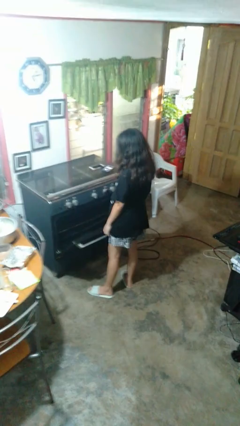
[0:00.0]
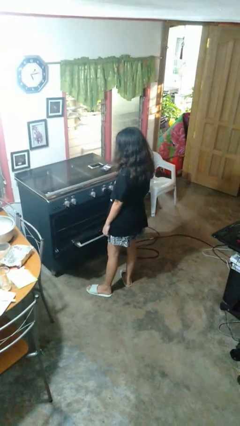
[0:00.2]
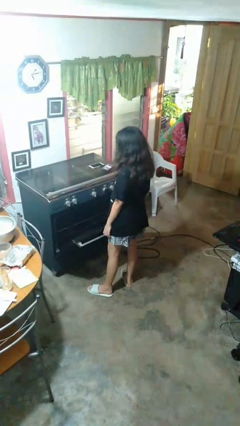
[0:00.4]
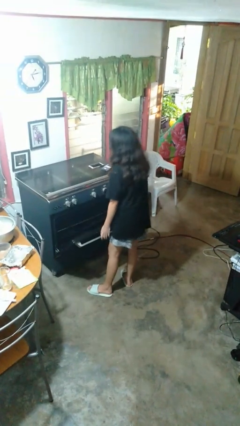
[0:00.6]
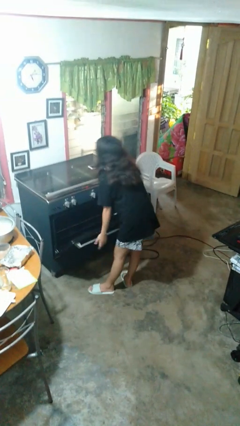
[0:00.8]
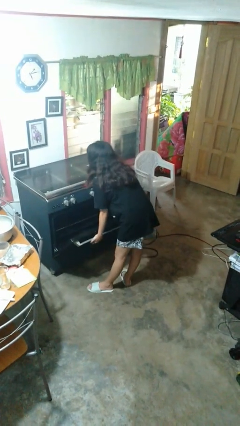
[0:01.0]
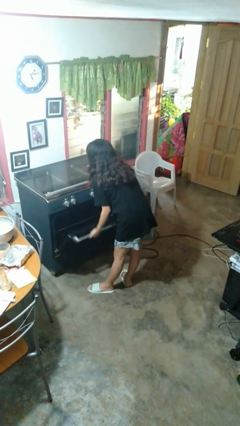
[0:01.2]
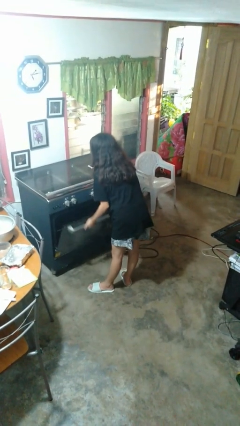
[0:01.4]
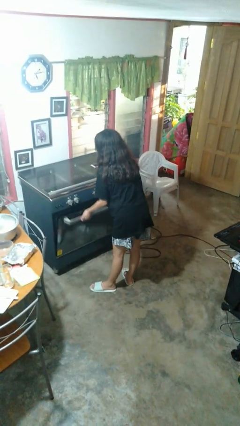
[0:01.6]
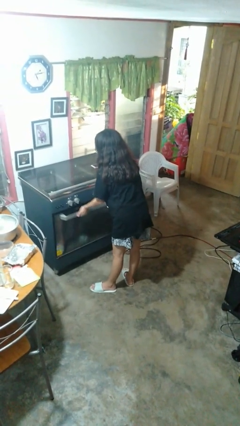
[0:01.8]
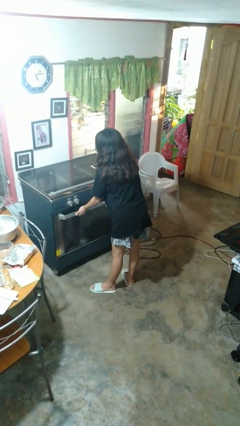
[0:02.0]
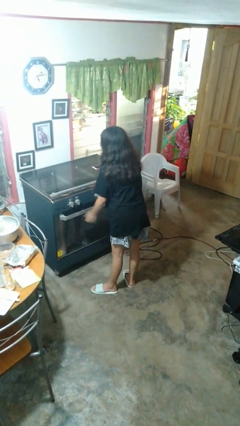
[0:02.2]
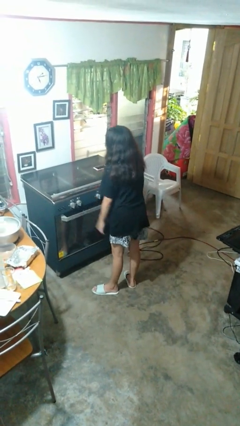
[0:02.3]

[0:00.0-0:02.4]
person closes oven door

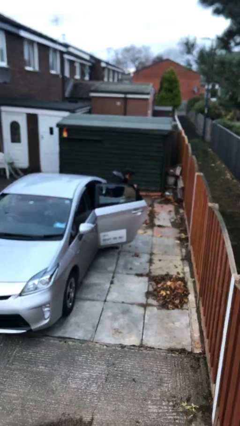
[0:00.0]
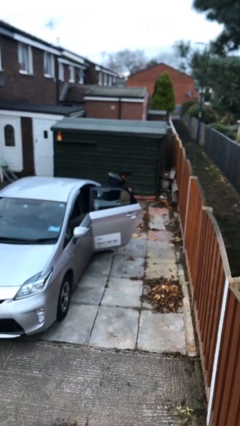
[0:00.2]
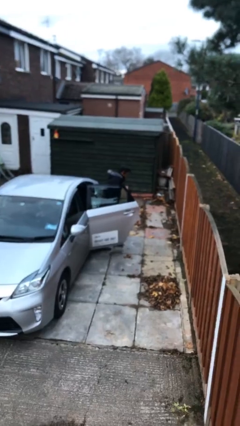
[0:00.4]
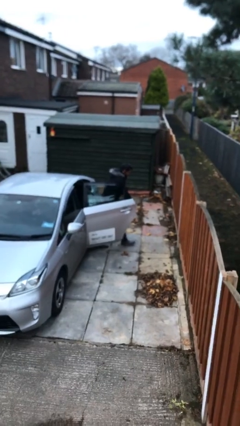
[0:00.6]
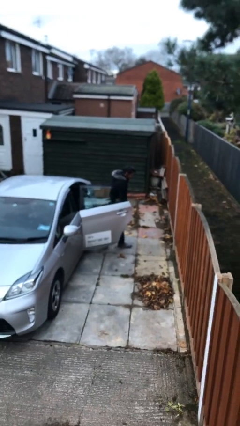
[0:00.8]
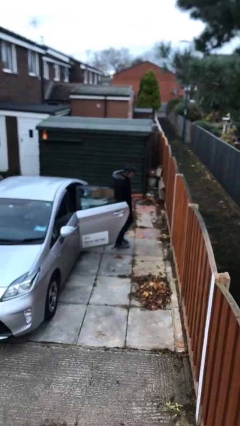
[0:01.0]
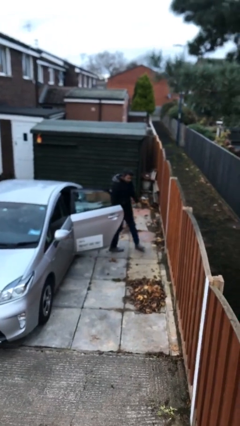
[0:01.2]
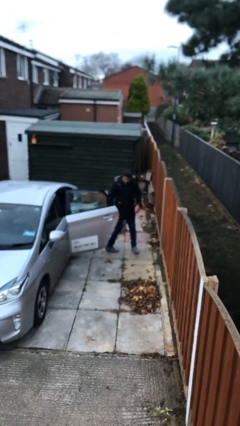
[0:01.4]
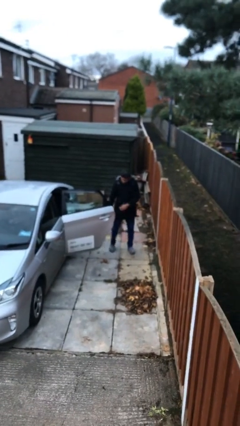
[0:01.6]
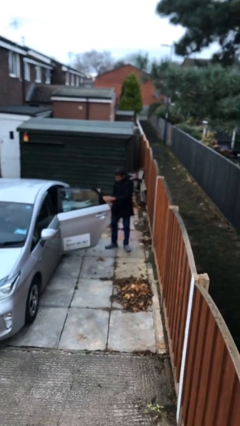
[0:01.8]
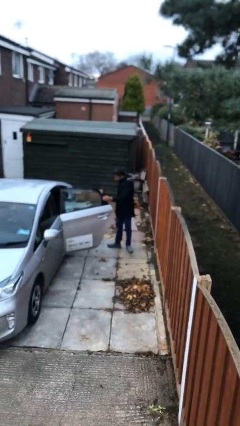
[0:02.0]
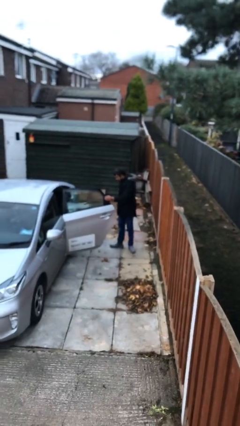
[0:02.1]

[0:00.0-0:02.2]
person exits car

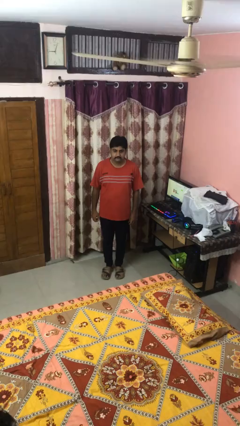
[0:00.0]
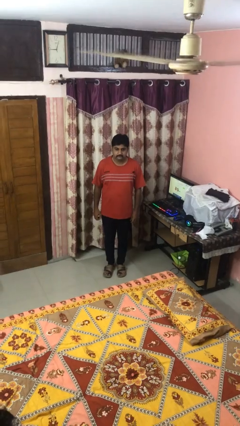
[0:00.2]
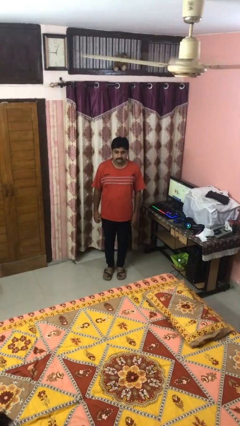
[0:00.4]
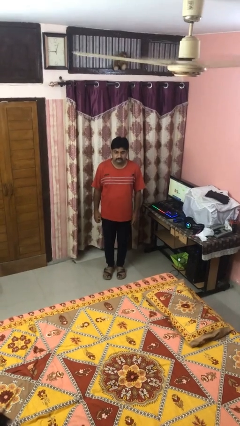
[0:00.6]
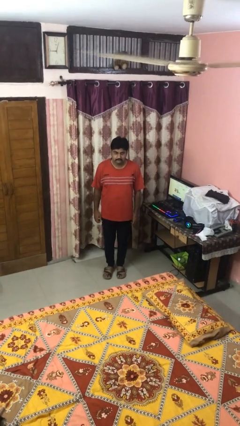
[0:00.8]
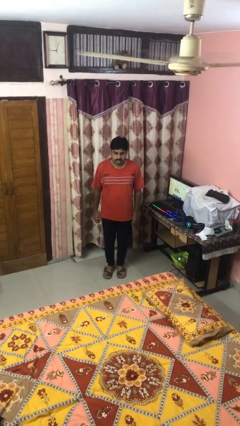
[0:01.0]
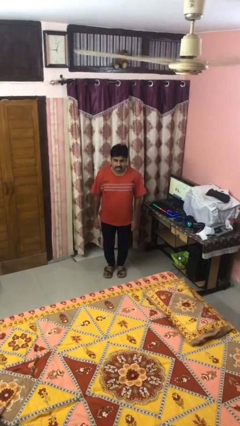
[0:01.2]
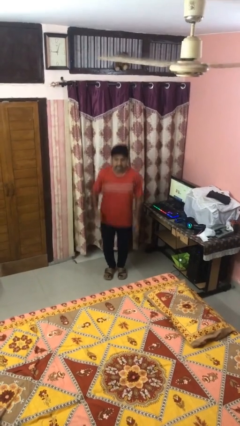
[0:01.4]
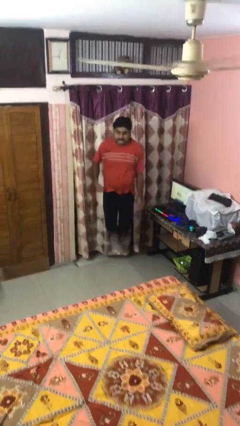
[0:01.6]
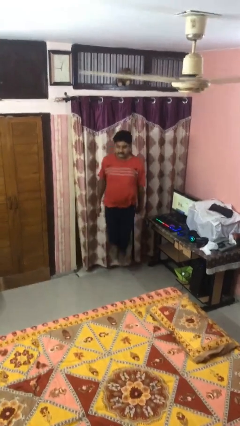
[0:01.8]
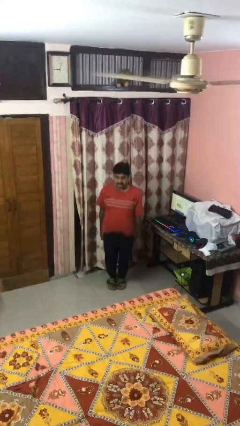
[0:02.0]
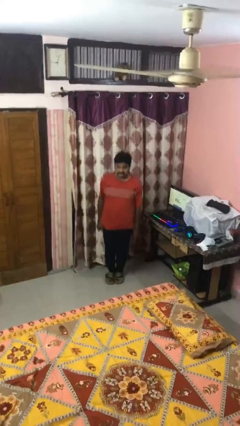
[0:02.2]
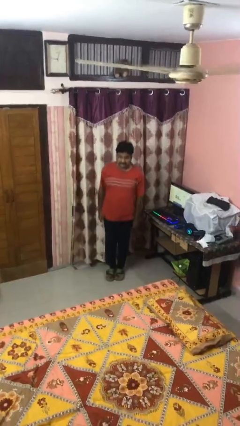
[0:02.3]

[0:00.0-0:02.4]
person jumps

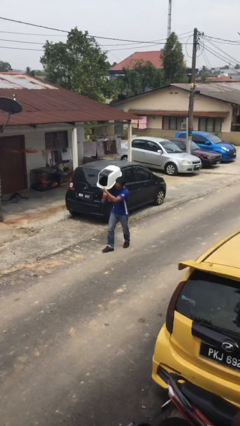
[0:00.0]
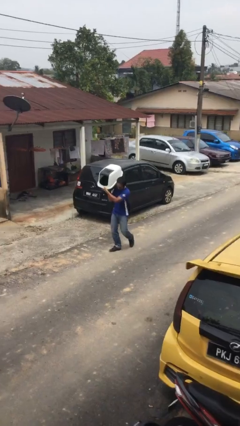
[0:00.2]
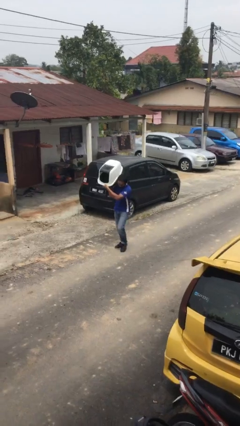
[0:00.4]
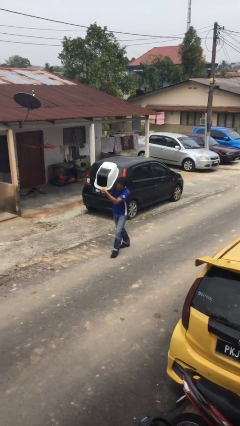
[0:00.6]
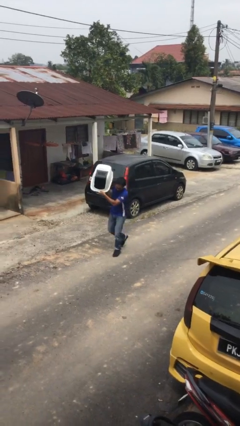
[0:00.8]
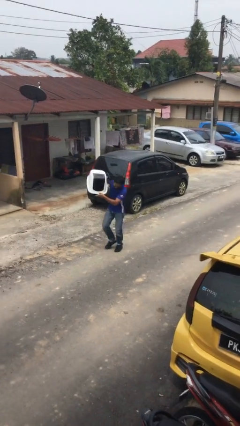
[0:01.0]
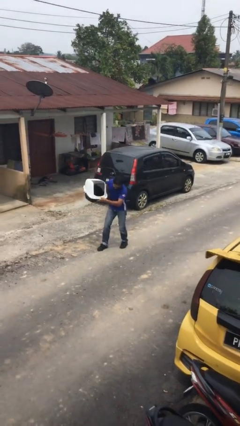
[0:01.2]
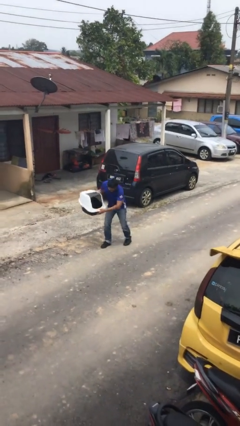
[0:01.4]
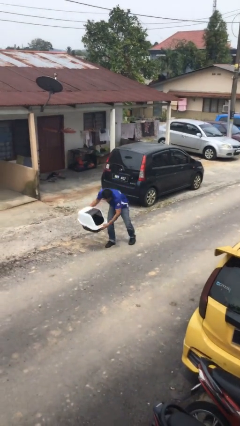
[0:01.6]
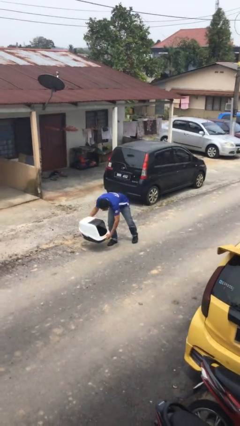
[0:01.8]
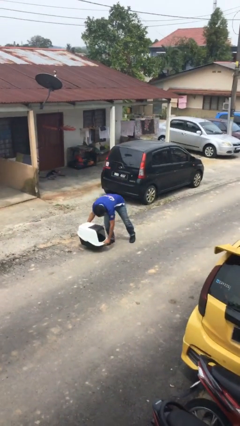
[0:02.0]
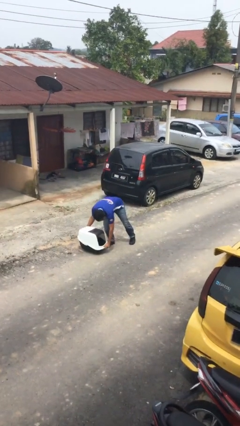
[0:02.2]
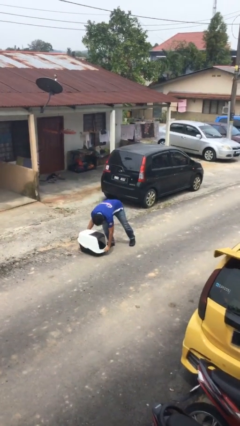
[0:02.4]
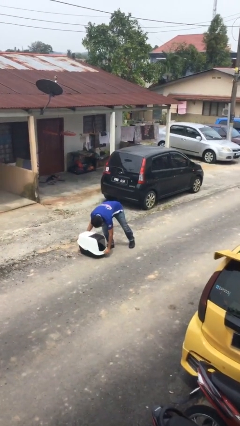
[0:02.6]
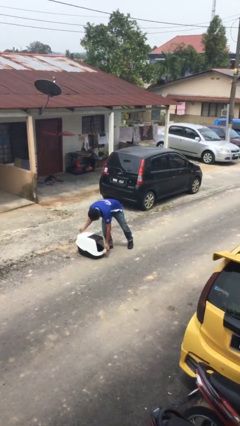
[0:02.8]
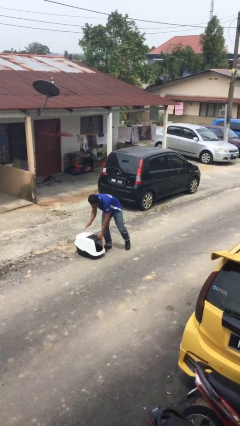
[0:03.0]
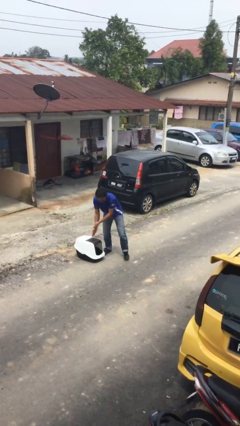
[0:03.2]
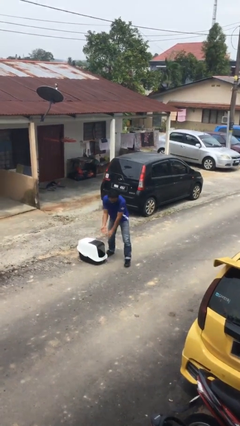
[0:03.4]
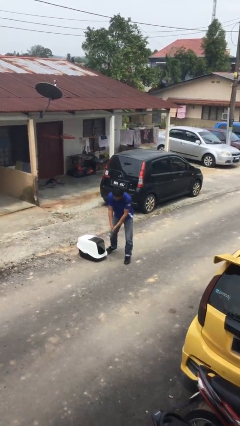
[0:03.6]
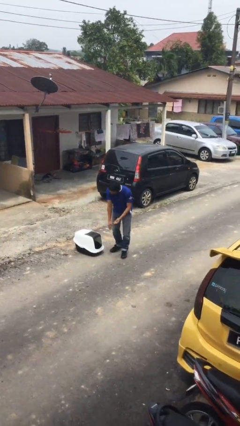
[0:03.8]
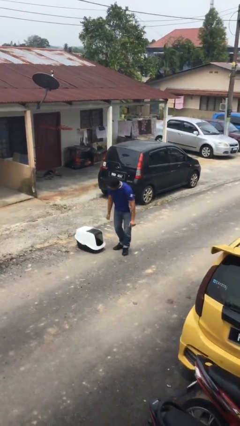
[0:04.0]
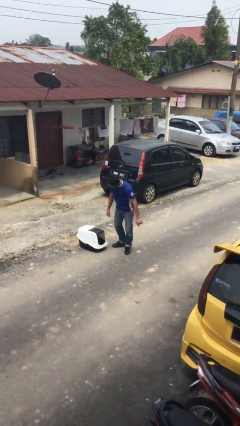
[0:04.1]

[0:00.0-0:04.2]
person puts down object on floor

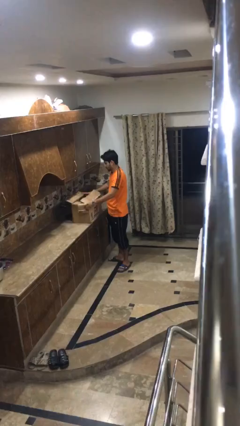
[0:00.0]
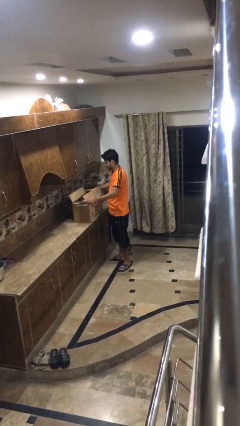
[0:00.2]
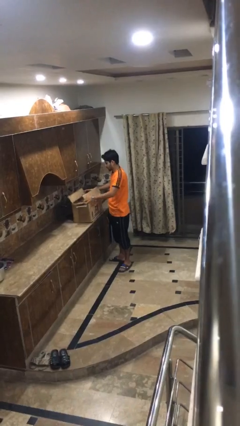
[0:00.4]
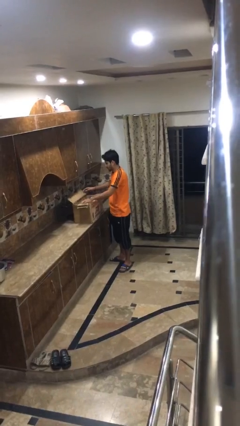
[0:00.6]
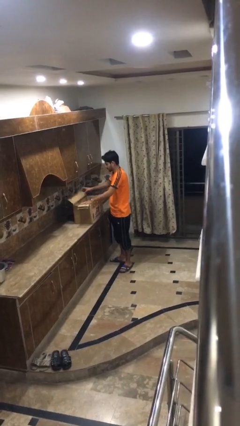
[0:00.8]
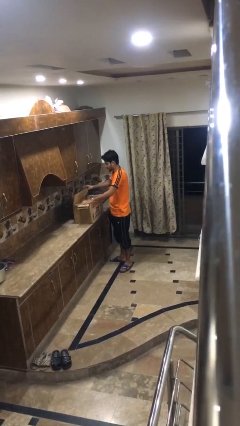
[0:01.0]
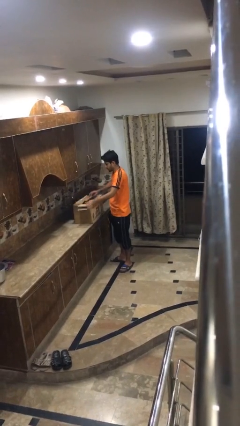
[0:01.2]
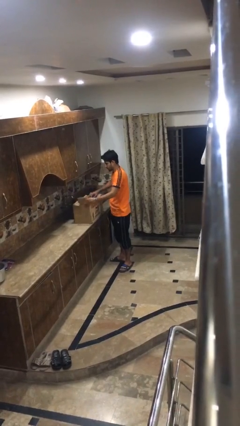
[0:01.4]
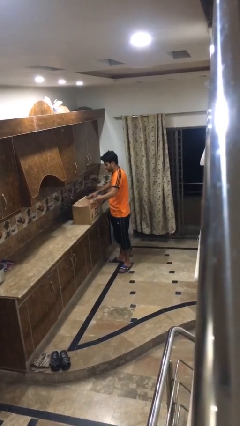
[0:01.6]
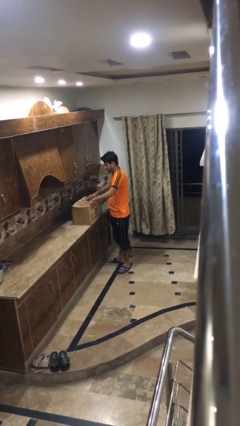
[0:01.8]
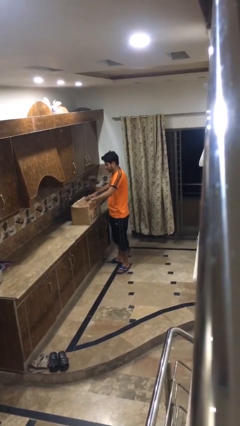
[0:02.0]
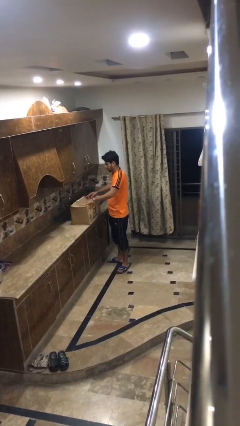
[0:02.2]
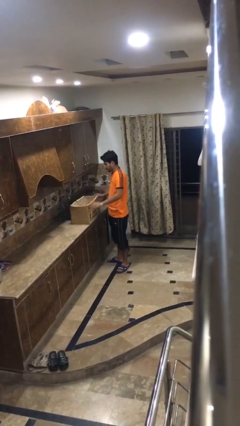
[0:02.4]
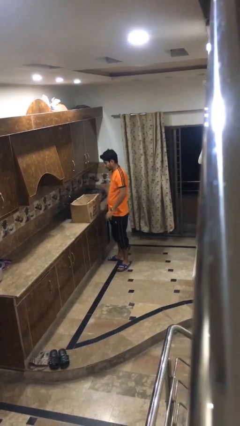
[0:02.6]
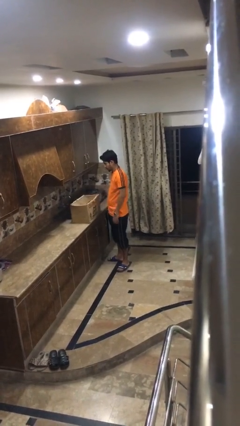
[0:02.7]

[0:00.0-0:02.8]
person closes box

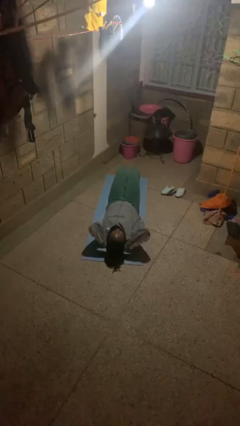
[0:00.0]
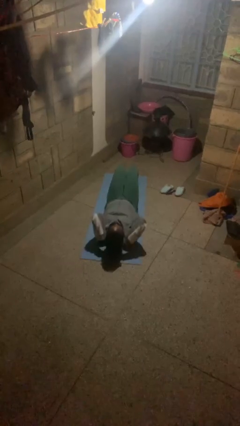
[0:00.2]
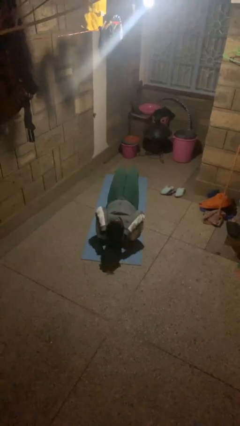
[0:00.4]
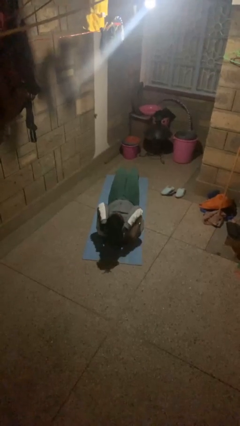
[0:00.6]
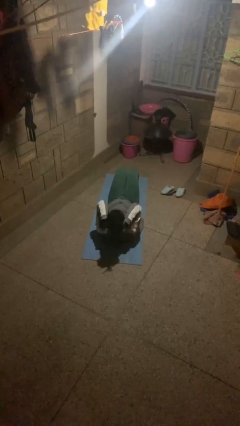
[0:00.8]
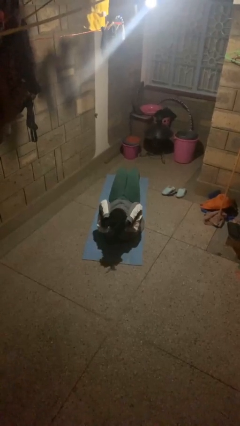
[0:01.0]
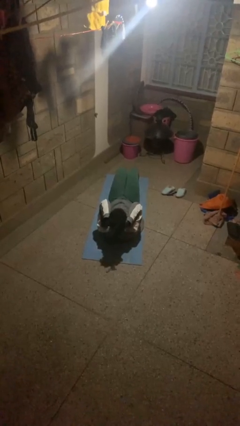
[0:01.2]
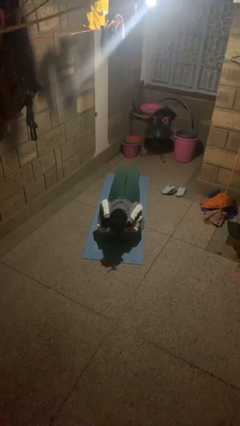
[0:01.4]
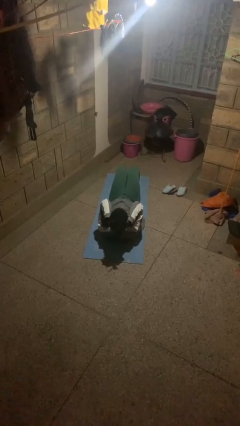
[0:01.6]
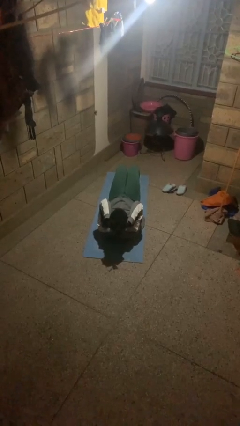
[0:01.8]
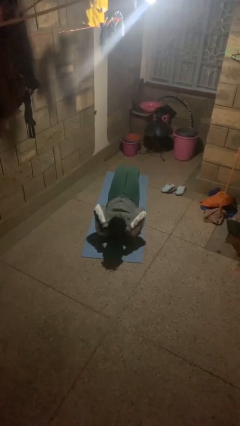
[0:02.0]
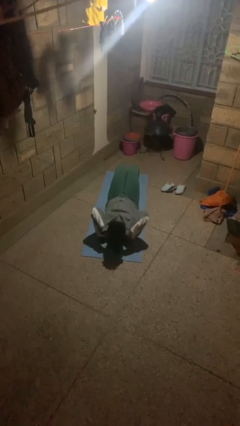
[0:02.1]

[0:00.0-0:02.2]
person exercises with situp

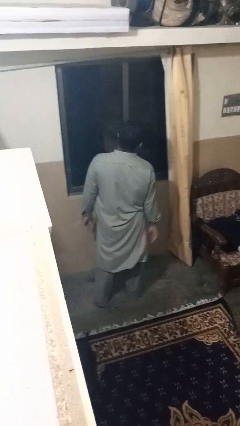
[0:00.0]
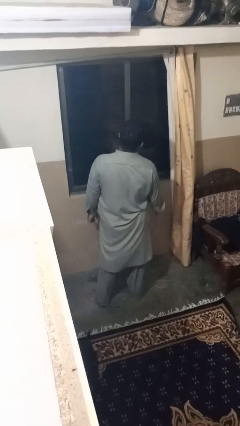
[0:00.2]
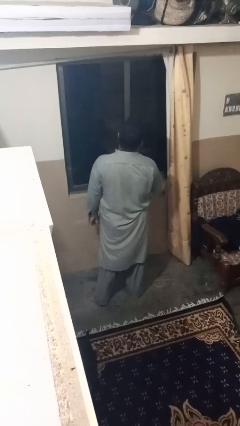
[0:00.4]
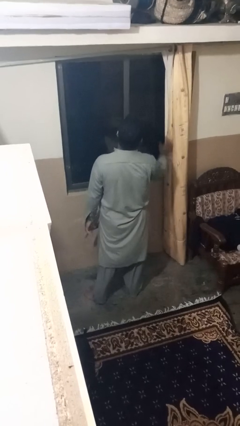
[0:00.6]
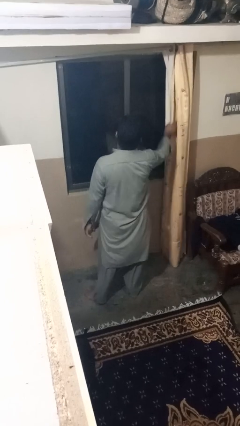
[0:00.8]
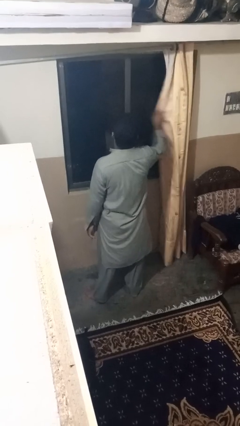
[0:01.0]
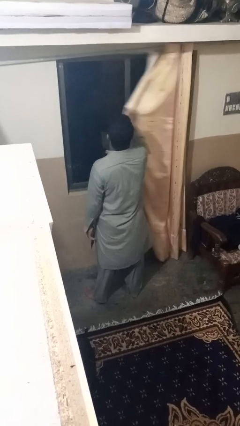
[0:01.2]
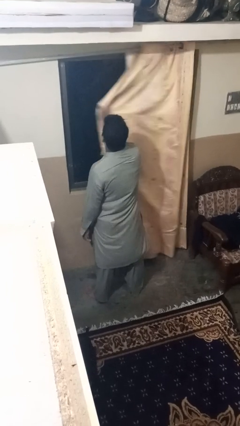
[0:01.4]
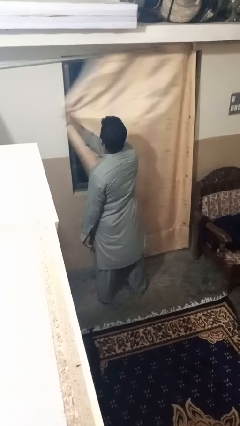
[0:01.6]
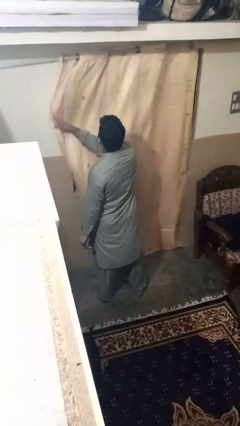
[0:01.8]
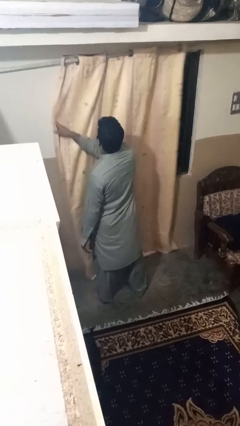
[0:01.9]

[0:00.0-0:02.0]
person closes curtains
